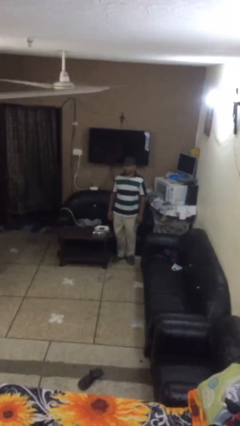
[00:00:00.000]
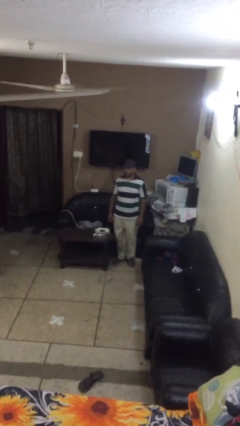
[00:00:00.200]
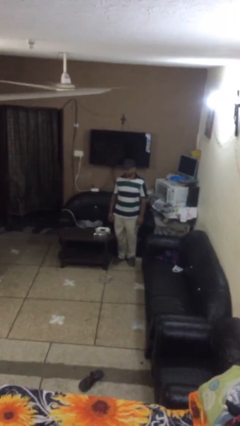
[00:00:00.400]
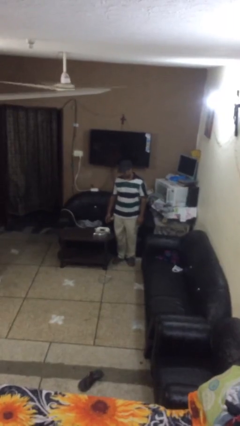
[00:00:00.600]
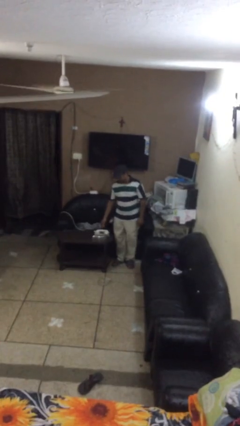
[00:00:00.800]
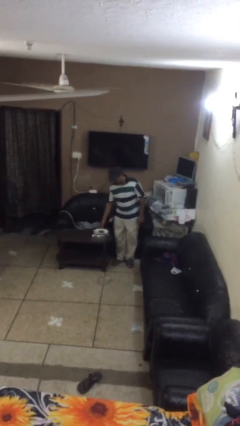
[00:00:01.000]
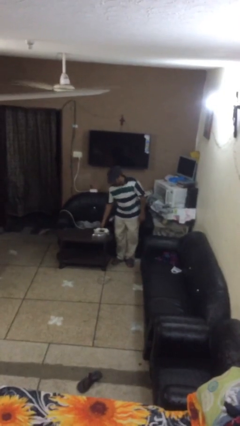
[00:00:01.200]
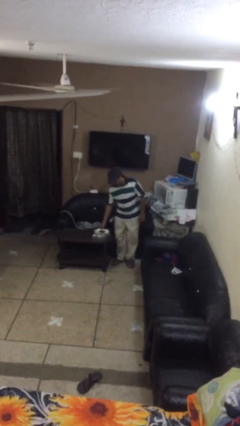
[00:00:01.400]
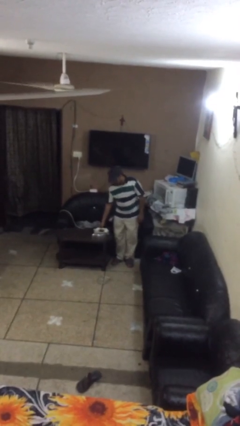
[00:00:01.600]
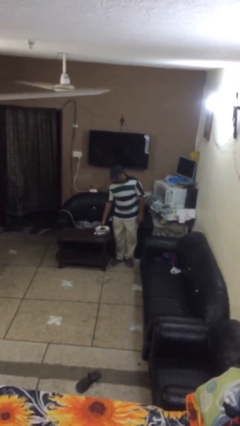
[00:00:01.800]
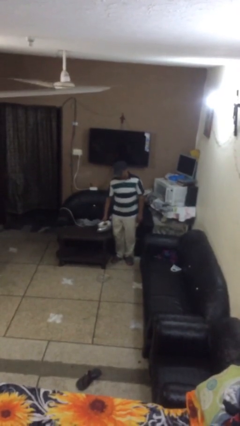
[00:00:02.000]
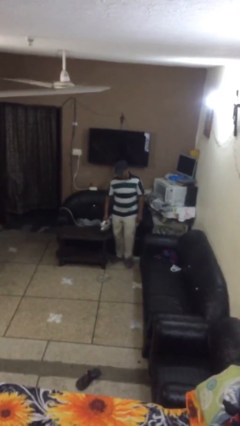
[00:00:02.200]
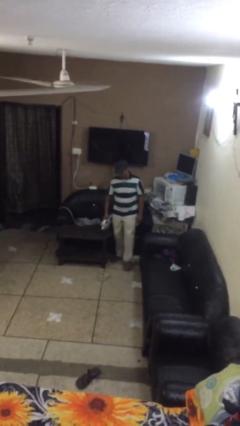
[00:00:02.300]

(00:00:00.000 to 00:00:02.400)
person picks up object from table

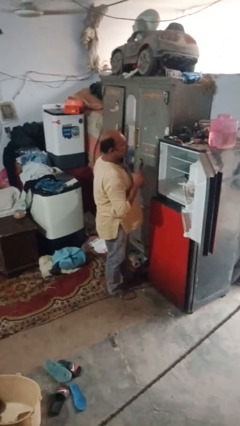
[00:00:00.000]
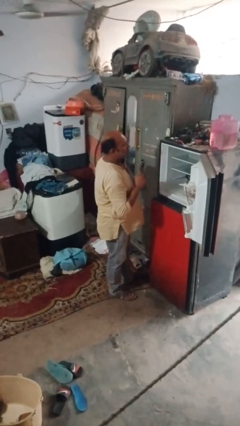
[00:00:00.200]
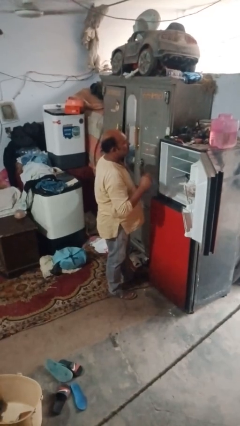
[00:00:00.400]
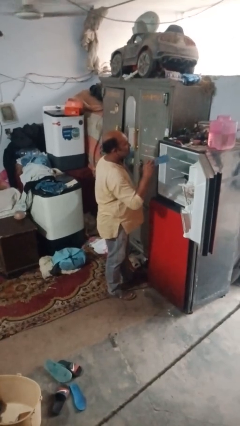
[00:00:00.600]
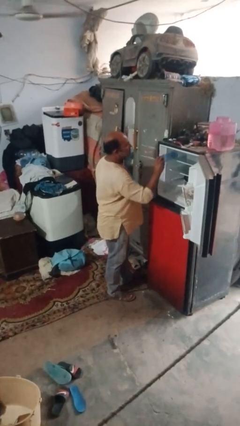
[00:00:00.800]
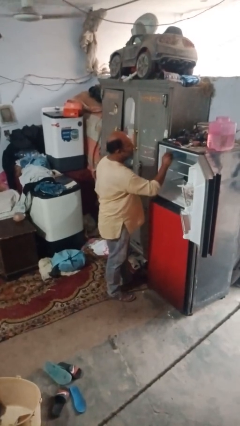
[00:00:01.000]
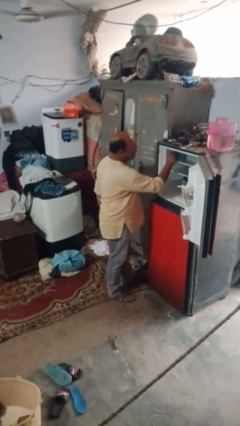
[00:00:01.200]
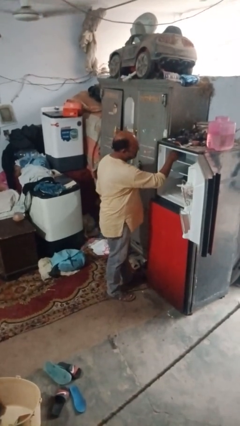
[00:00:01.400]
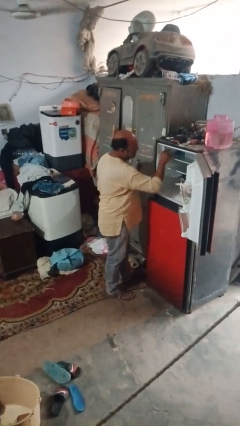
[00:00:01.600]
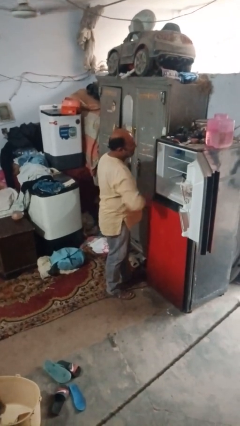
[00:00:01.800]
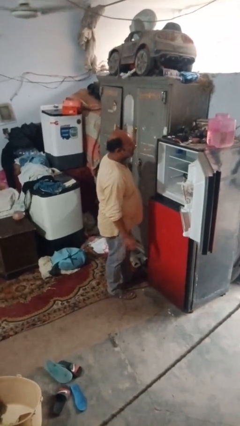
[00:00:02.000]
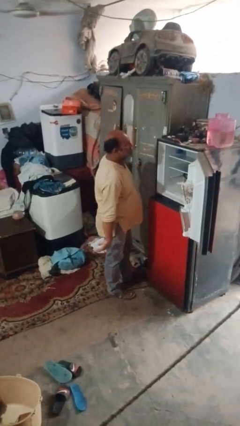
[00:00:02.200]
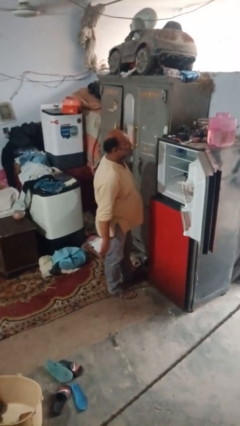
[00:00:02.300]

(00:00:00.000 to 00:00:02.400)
person puts object into refrigerator

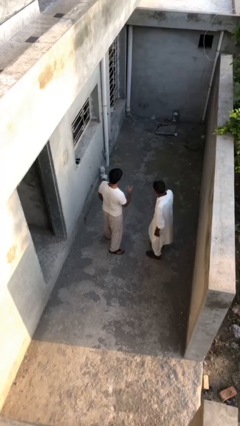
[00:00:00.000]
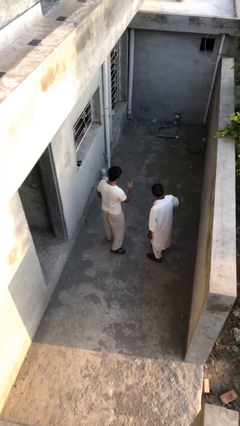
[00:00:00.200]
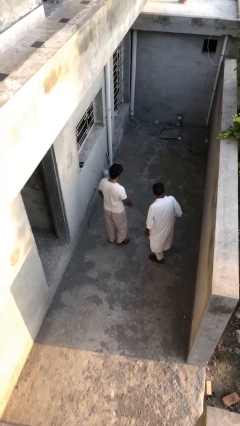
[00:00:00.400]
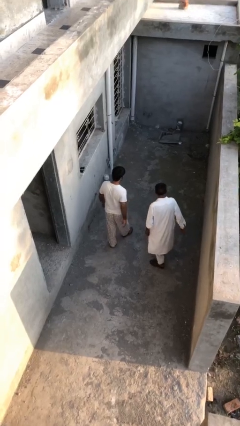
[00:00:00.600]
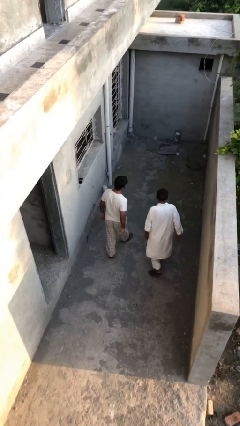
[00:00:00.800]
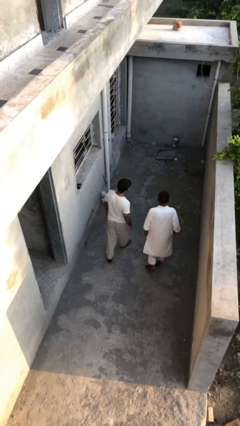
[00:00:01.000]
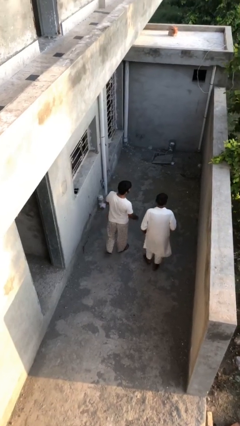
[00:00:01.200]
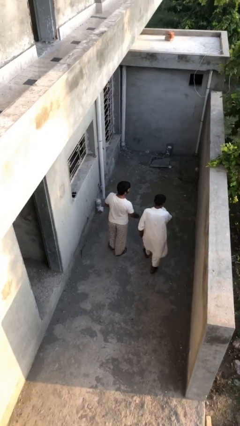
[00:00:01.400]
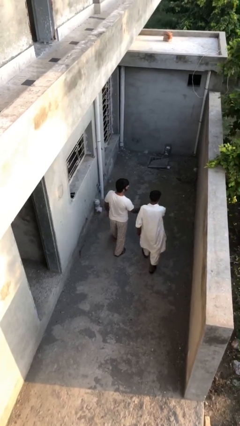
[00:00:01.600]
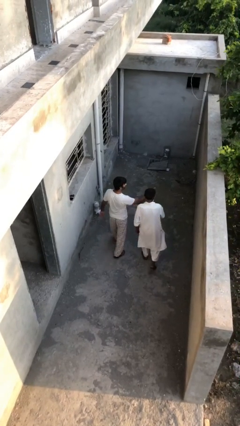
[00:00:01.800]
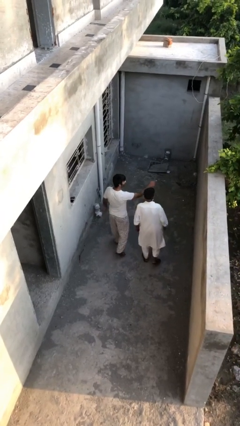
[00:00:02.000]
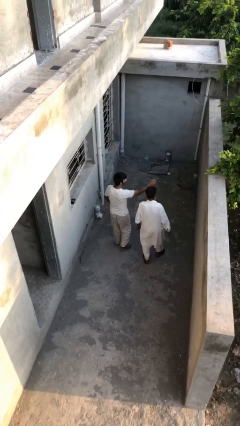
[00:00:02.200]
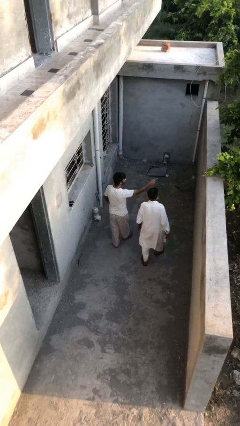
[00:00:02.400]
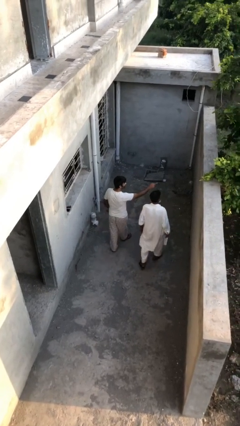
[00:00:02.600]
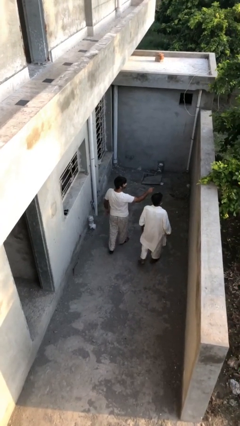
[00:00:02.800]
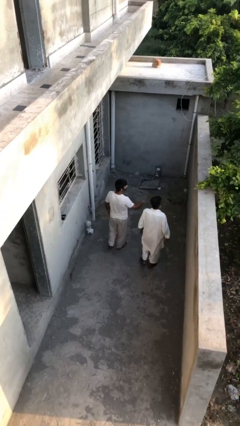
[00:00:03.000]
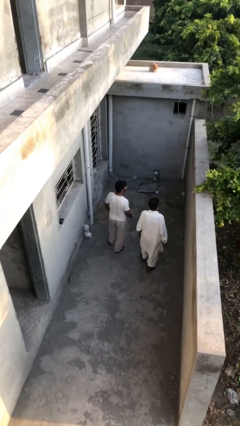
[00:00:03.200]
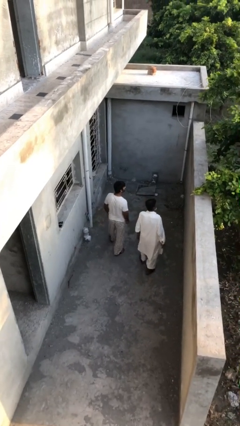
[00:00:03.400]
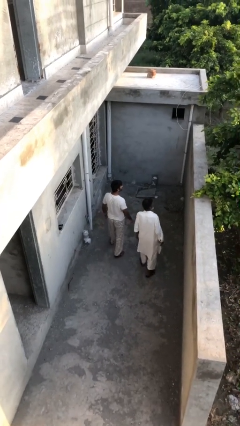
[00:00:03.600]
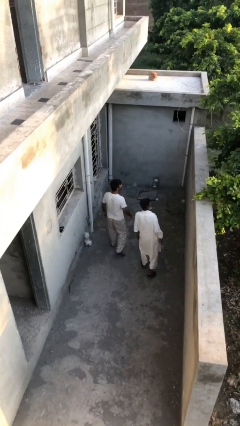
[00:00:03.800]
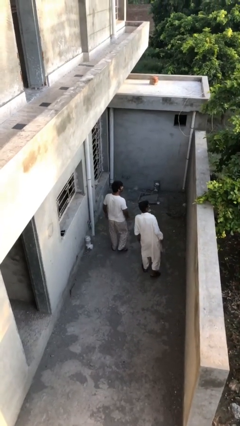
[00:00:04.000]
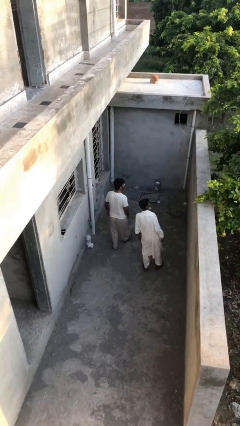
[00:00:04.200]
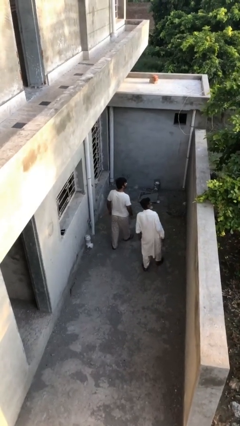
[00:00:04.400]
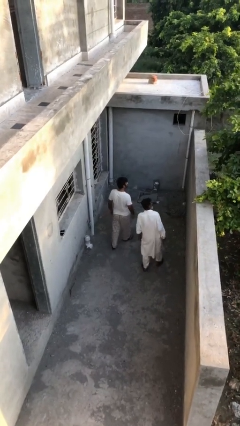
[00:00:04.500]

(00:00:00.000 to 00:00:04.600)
person talks to person

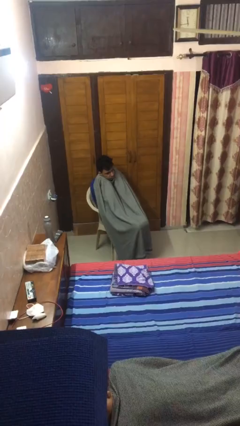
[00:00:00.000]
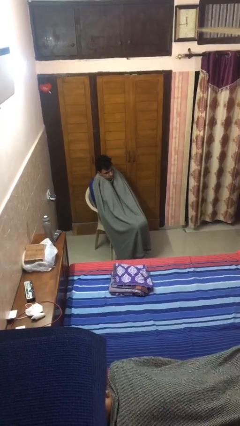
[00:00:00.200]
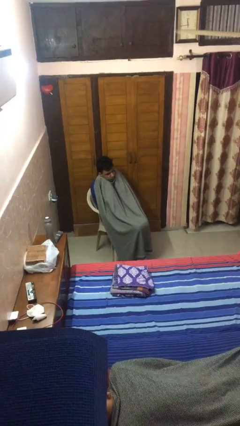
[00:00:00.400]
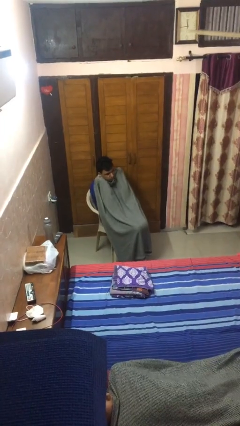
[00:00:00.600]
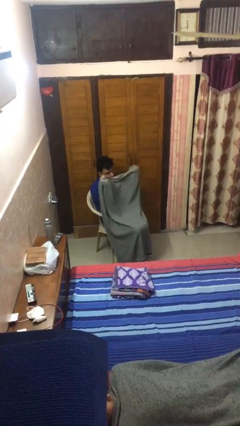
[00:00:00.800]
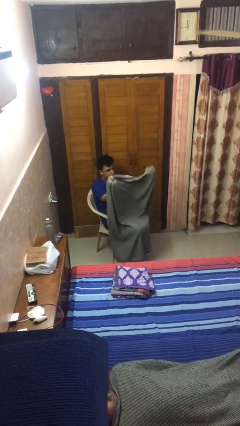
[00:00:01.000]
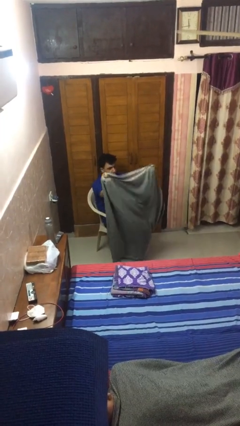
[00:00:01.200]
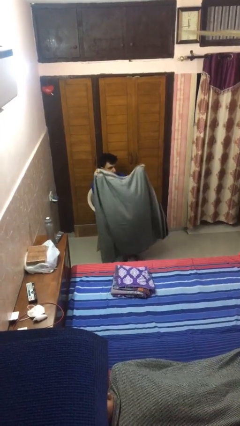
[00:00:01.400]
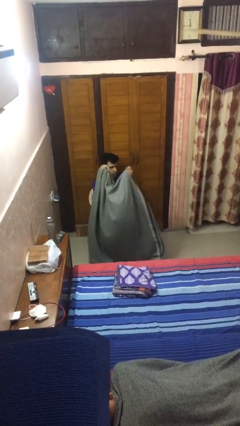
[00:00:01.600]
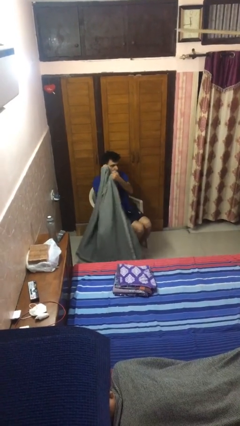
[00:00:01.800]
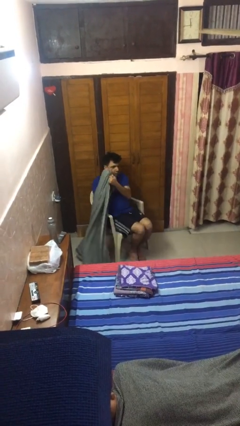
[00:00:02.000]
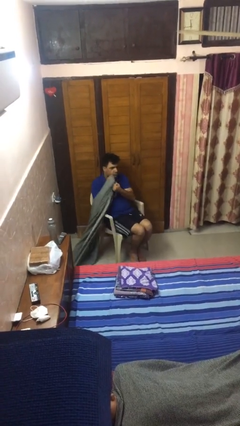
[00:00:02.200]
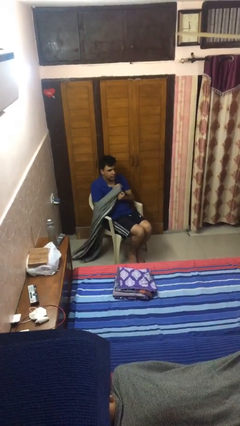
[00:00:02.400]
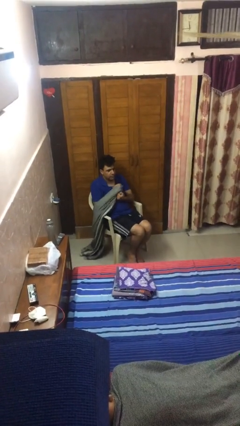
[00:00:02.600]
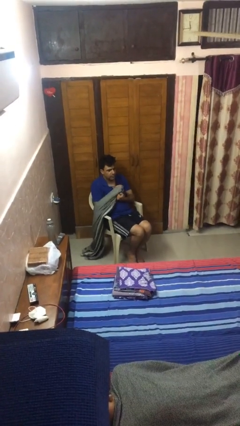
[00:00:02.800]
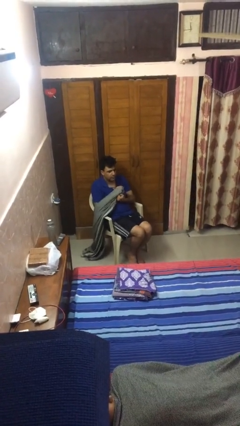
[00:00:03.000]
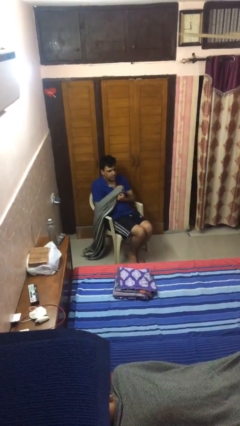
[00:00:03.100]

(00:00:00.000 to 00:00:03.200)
person uncovers with blanket

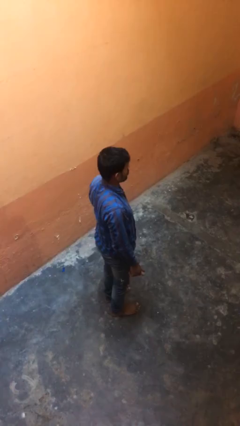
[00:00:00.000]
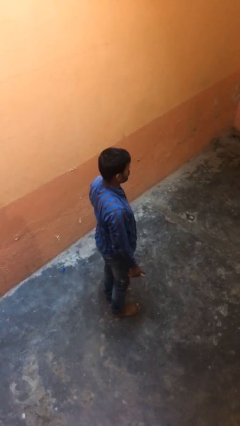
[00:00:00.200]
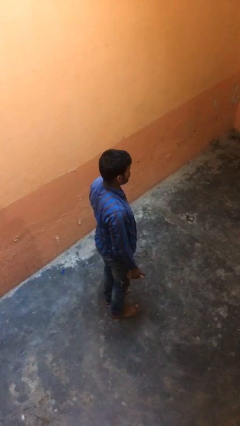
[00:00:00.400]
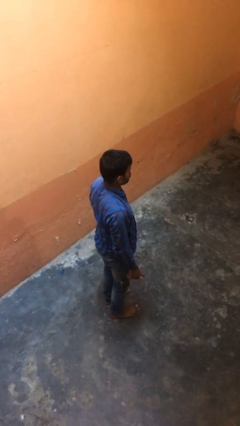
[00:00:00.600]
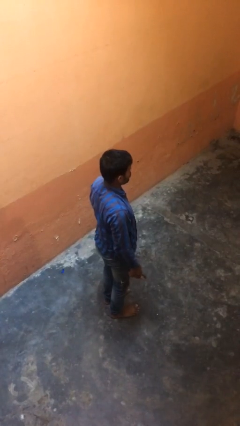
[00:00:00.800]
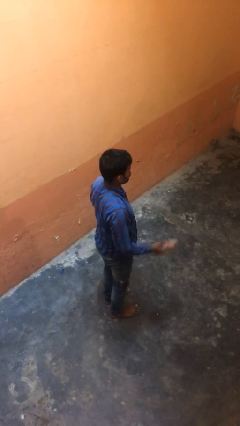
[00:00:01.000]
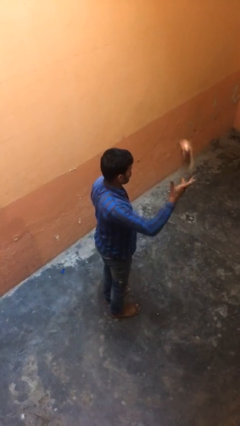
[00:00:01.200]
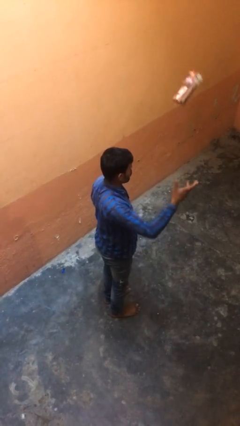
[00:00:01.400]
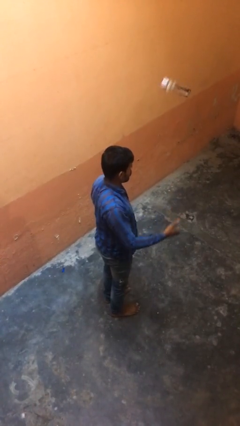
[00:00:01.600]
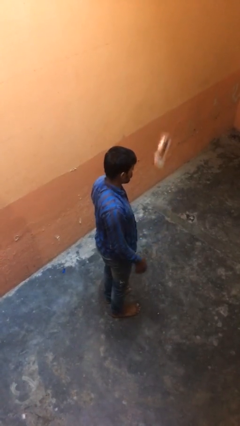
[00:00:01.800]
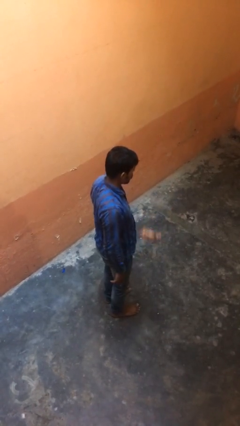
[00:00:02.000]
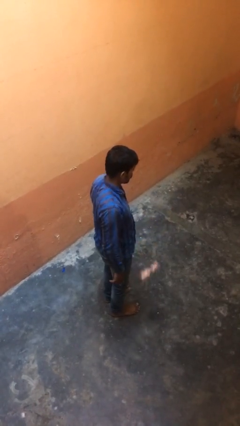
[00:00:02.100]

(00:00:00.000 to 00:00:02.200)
person throws object into air

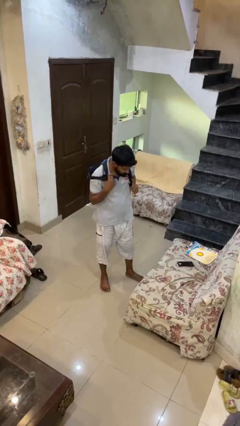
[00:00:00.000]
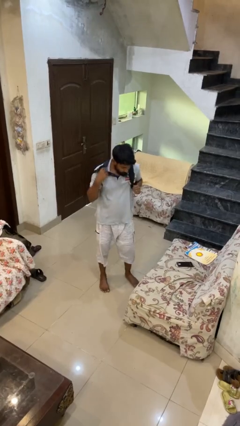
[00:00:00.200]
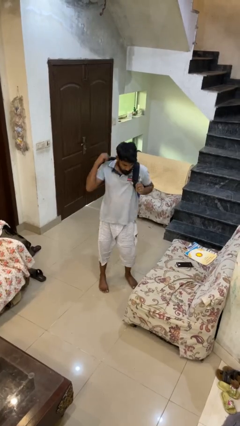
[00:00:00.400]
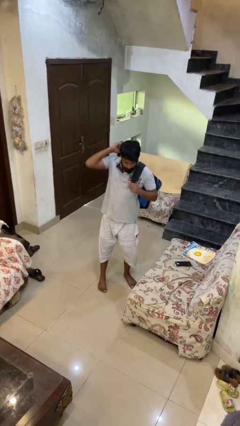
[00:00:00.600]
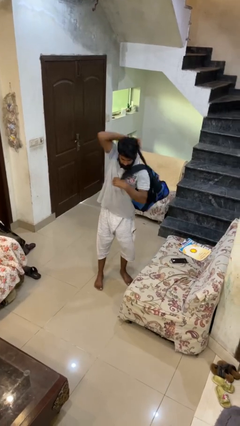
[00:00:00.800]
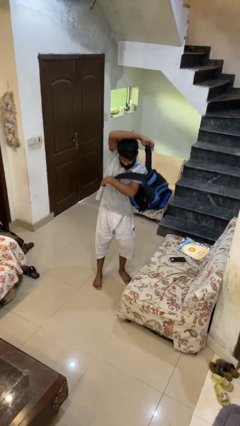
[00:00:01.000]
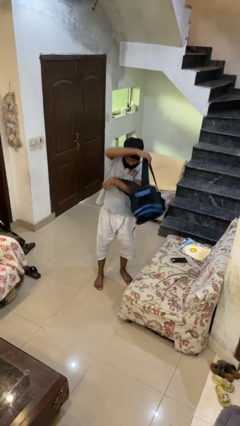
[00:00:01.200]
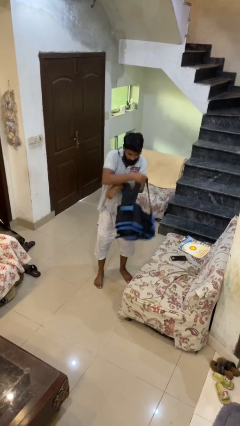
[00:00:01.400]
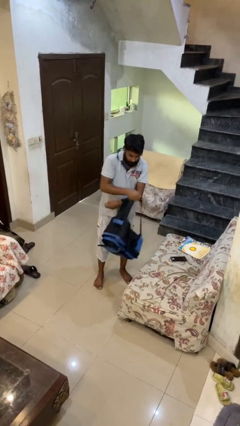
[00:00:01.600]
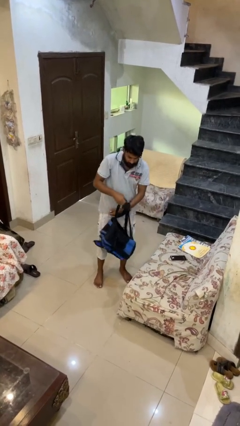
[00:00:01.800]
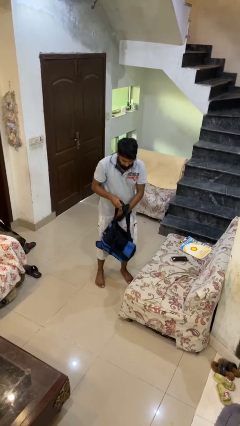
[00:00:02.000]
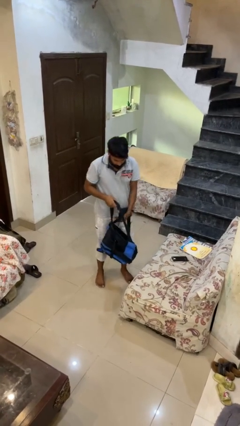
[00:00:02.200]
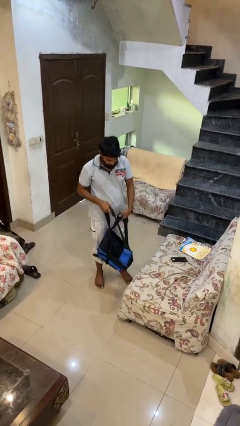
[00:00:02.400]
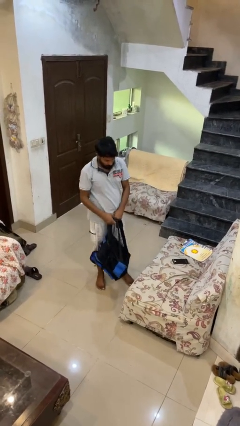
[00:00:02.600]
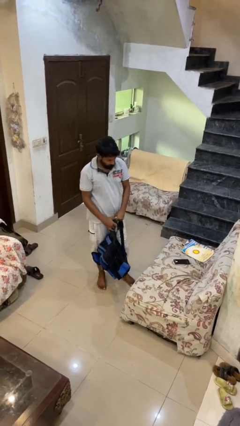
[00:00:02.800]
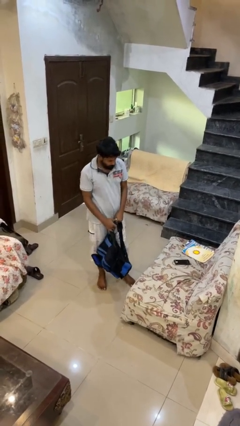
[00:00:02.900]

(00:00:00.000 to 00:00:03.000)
person takes off backpack
